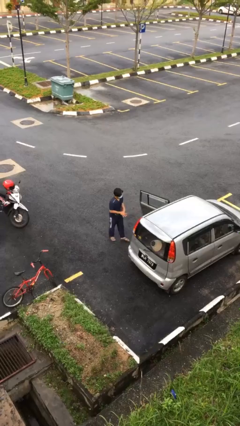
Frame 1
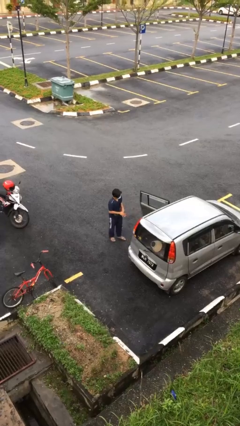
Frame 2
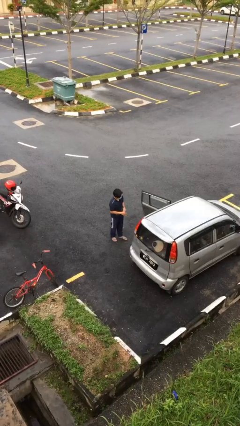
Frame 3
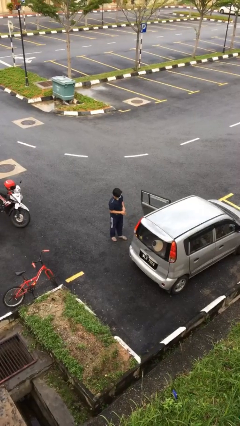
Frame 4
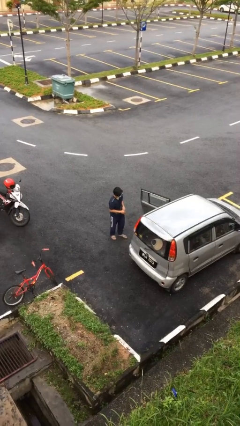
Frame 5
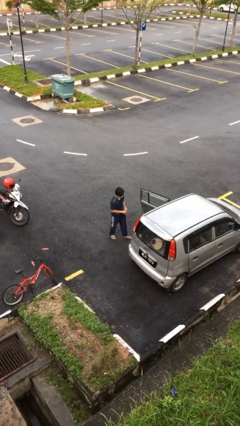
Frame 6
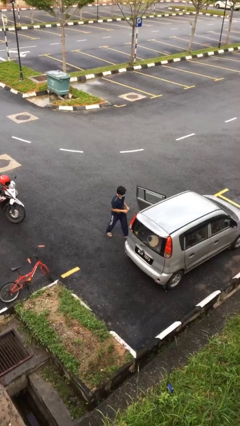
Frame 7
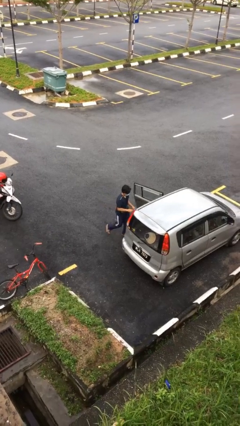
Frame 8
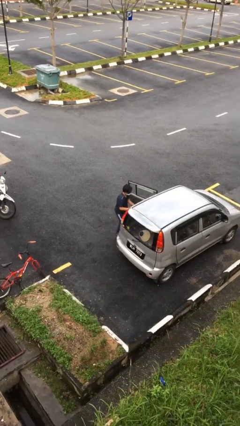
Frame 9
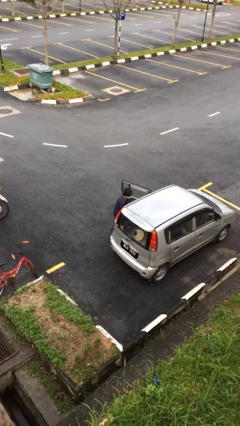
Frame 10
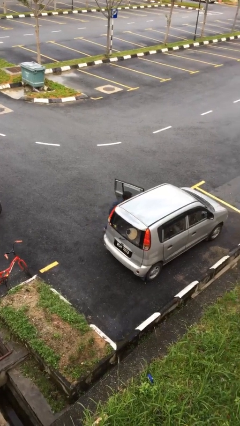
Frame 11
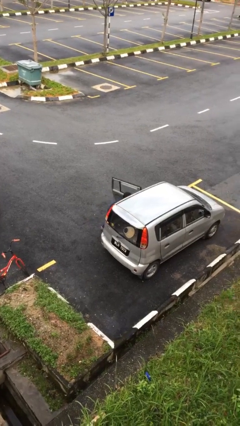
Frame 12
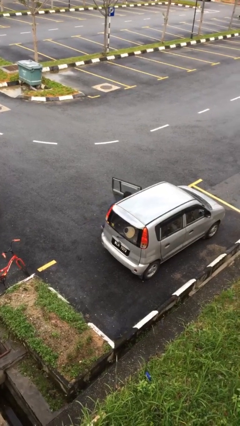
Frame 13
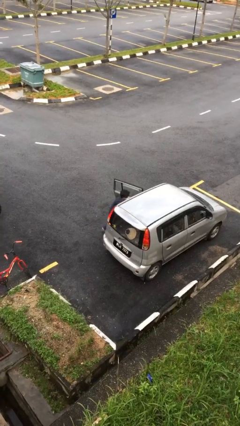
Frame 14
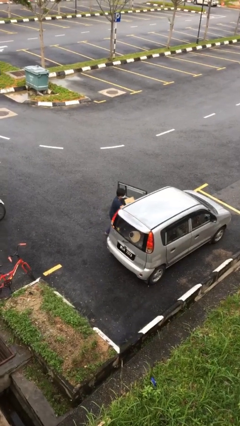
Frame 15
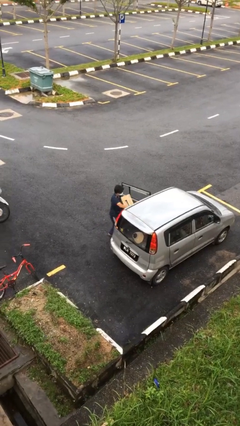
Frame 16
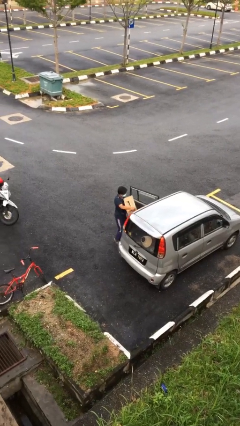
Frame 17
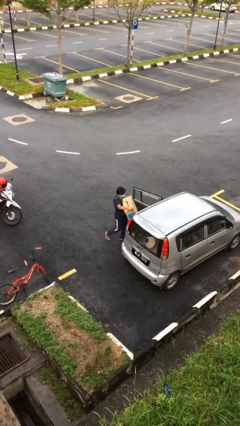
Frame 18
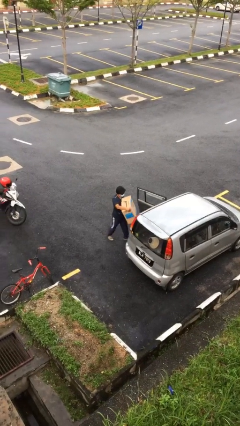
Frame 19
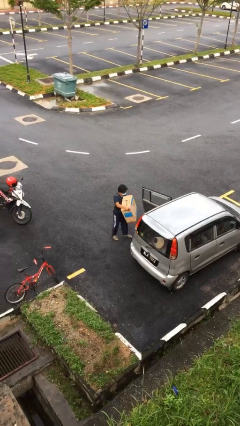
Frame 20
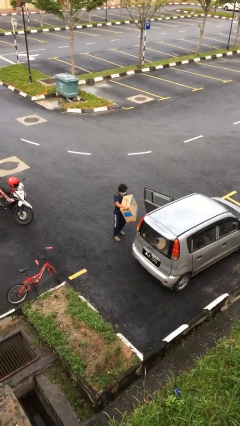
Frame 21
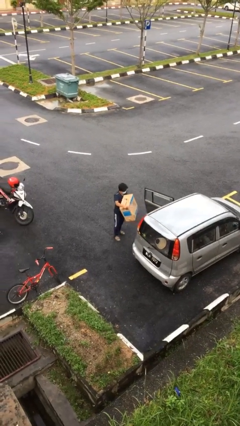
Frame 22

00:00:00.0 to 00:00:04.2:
person unloads car

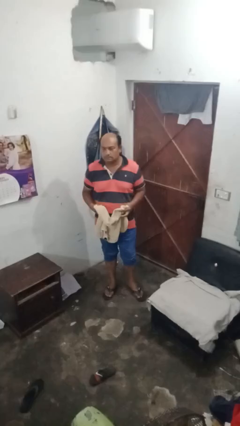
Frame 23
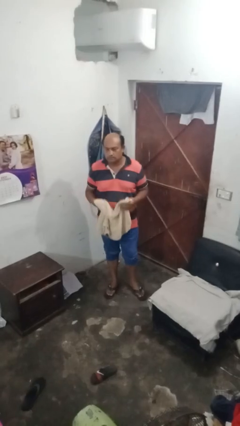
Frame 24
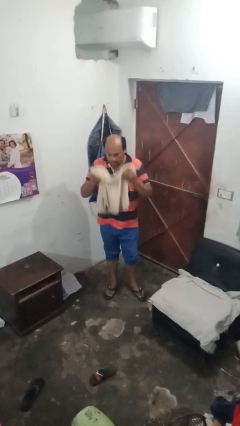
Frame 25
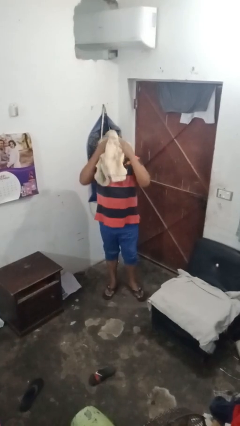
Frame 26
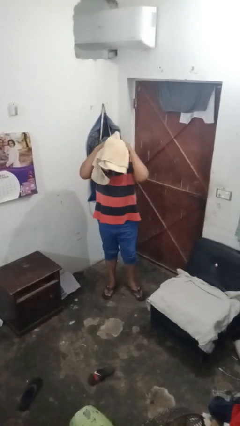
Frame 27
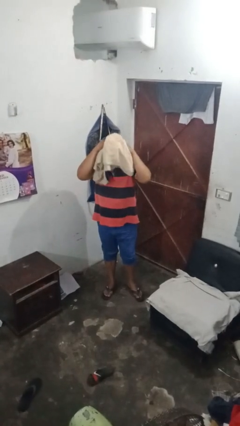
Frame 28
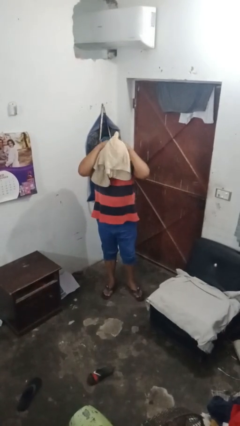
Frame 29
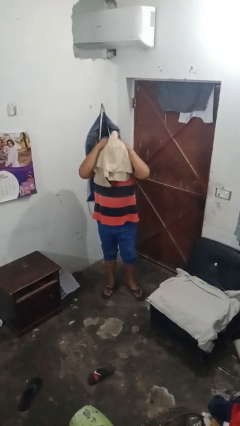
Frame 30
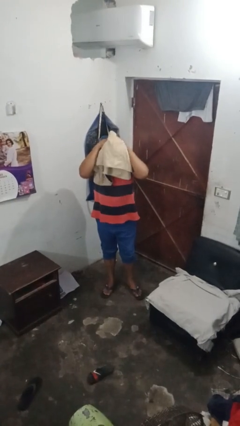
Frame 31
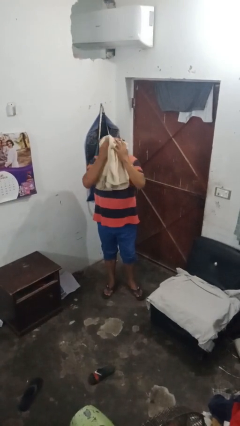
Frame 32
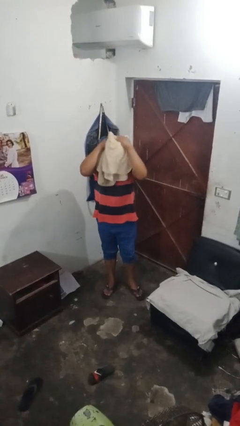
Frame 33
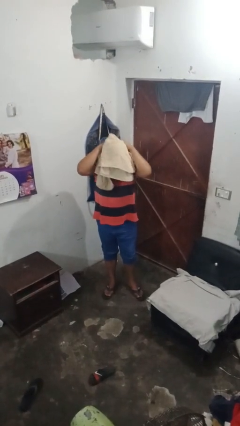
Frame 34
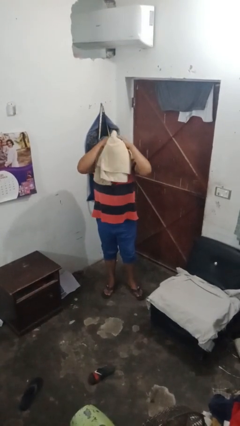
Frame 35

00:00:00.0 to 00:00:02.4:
person dries hair with towel

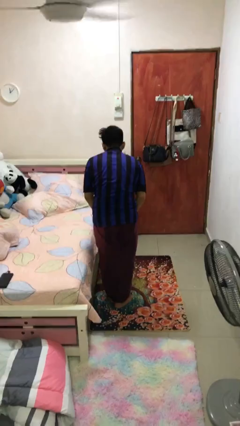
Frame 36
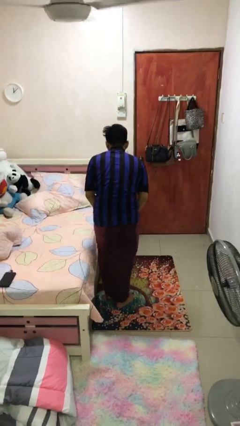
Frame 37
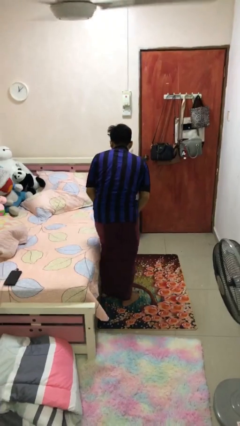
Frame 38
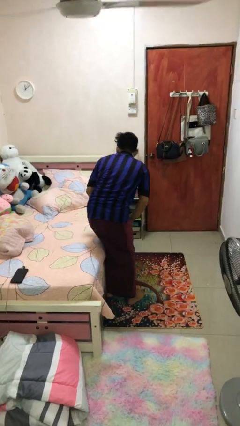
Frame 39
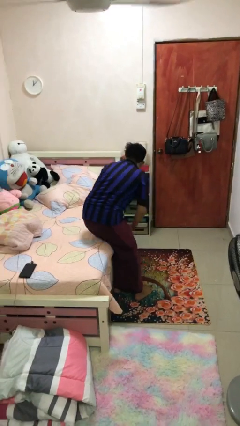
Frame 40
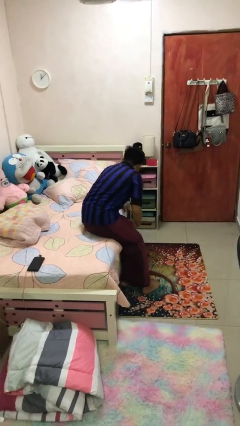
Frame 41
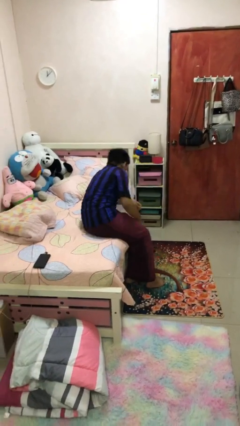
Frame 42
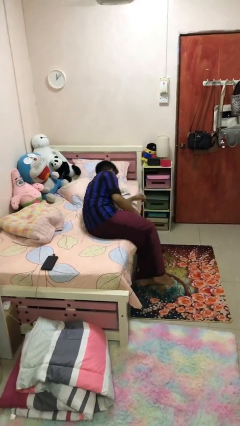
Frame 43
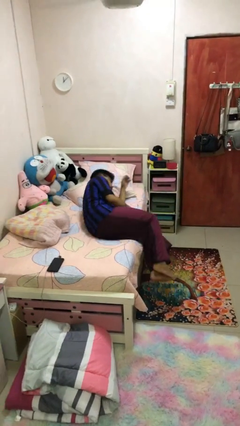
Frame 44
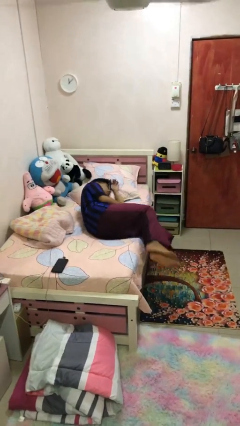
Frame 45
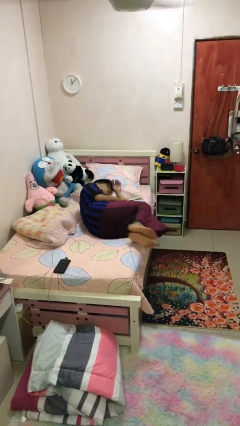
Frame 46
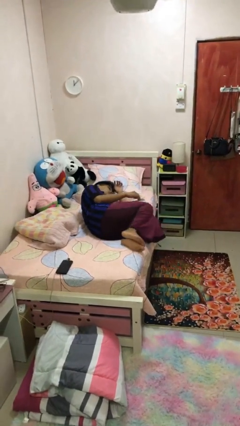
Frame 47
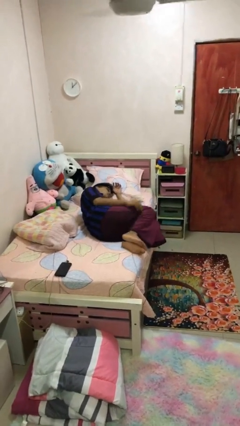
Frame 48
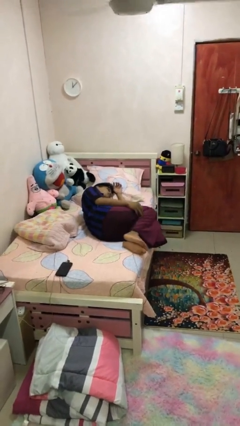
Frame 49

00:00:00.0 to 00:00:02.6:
person lies down on bed

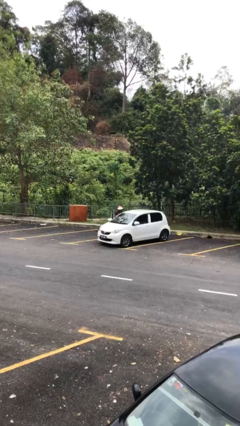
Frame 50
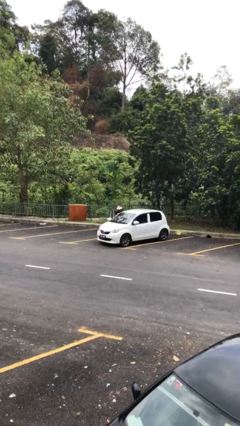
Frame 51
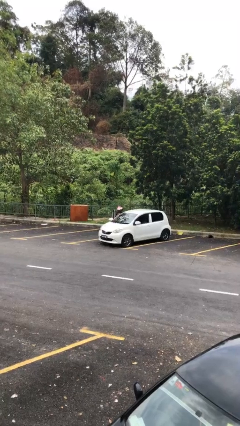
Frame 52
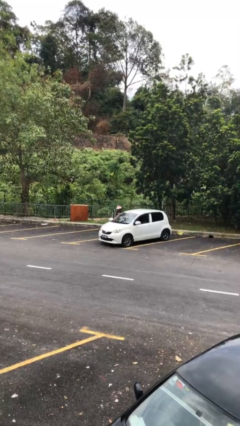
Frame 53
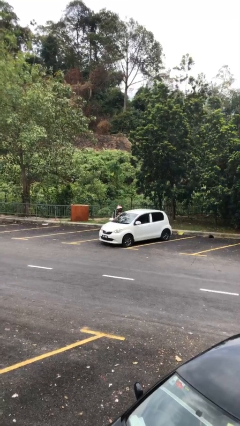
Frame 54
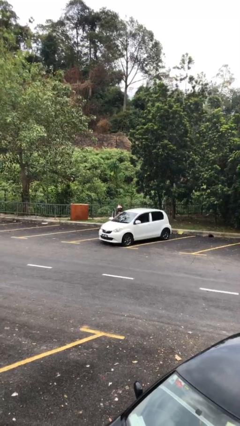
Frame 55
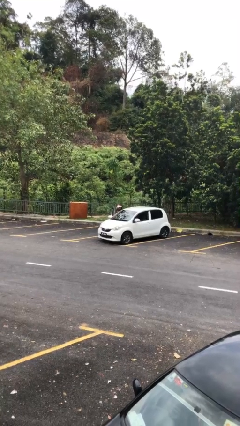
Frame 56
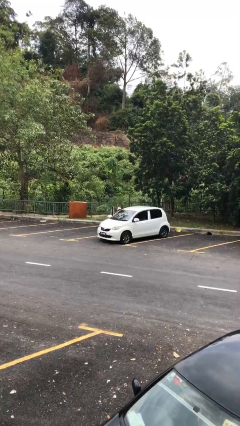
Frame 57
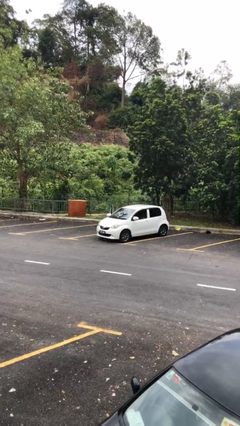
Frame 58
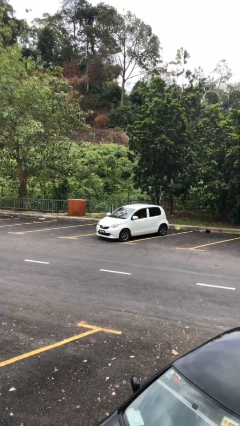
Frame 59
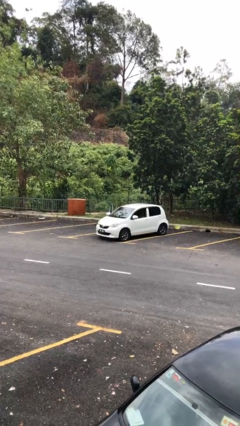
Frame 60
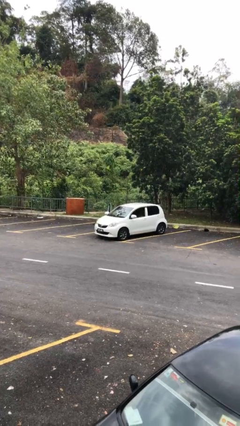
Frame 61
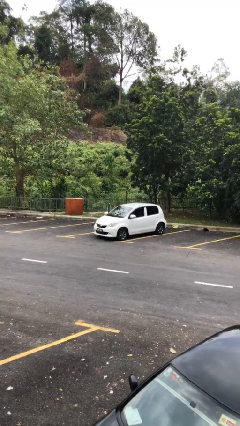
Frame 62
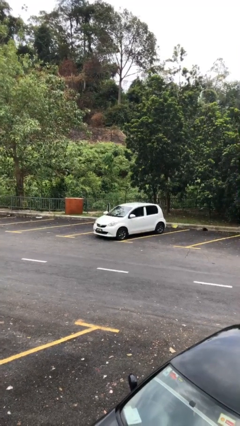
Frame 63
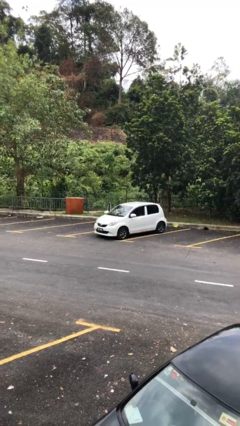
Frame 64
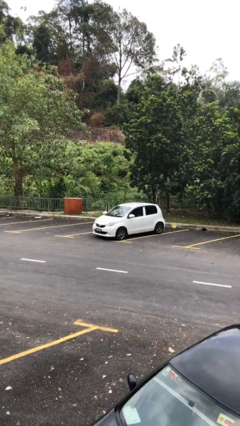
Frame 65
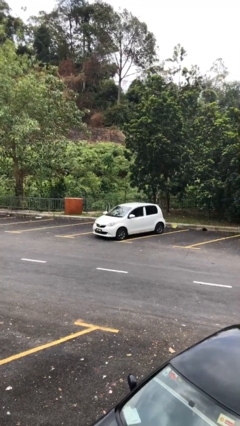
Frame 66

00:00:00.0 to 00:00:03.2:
person enters car

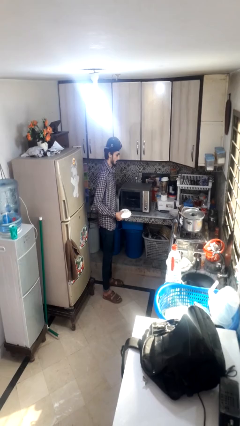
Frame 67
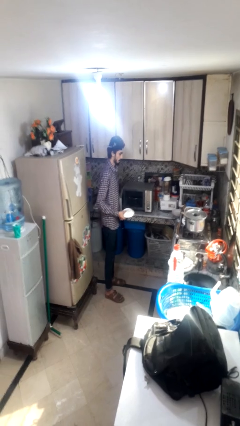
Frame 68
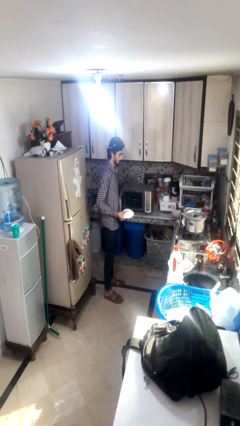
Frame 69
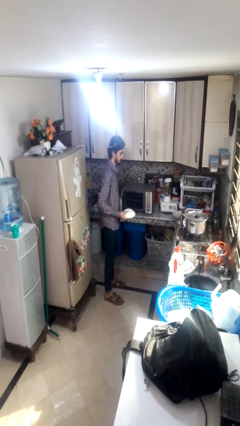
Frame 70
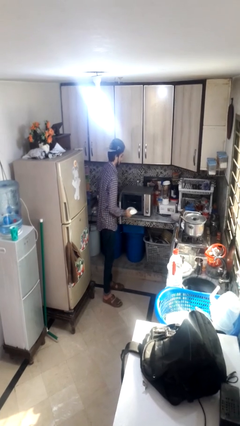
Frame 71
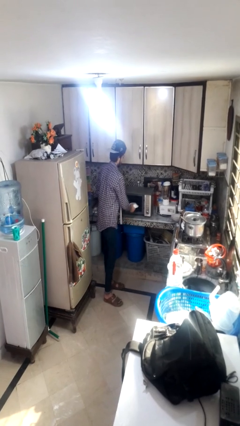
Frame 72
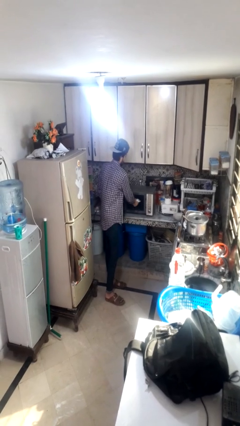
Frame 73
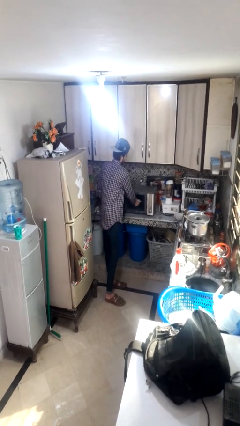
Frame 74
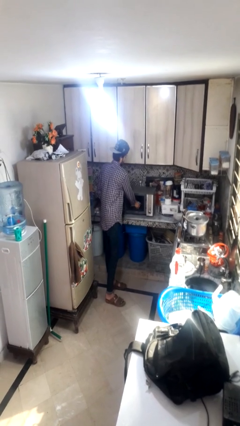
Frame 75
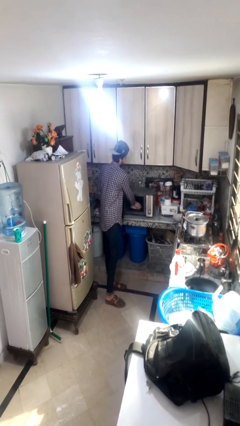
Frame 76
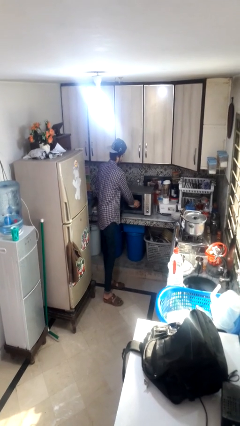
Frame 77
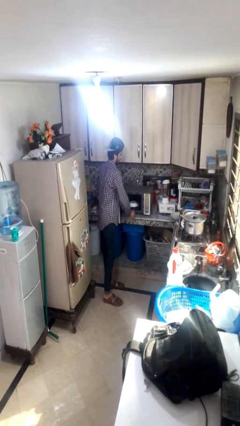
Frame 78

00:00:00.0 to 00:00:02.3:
person puts object into microwave

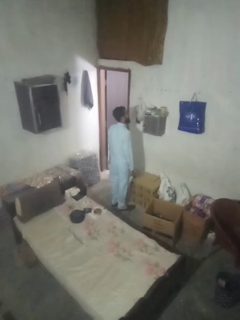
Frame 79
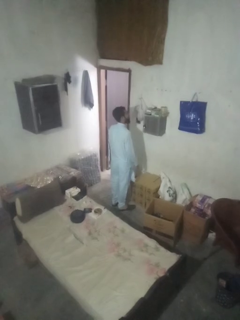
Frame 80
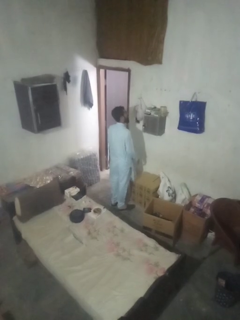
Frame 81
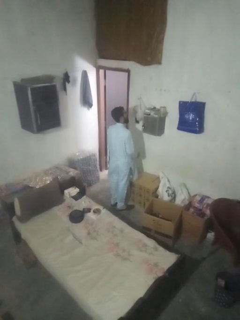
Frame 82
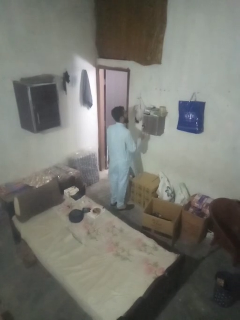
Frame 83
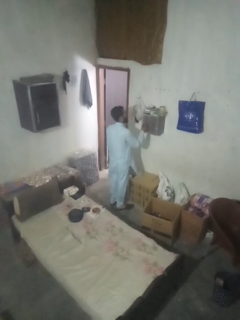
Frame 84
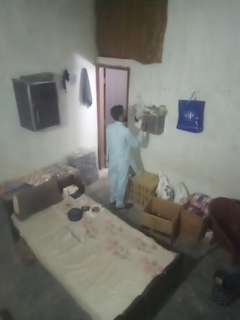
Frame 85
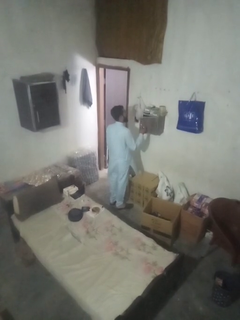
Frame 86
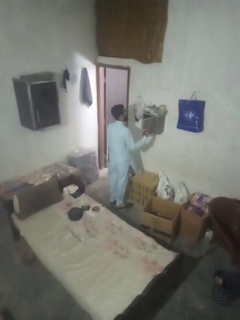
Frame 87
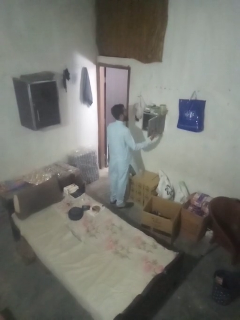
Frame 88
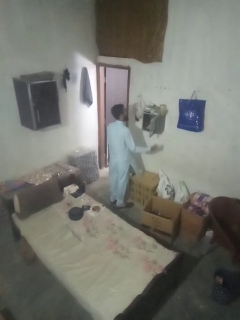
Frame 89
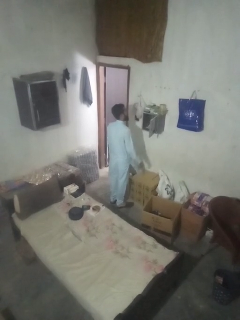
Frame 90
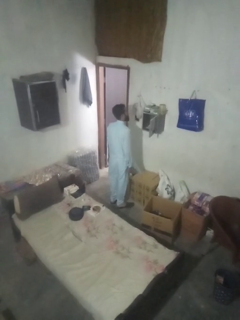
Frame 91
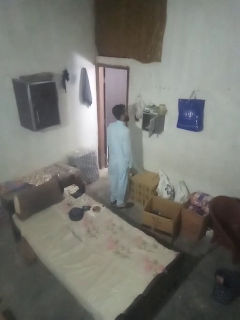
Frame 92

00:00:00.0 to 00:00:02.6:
person opens mailbox

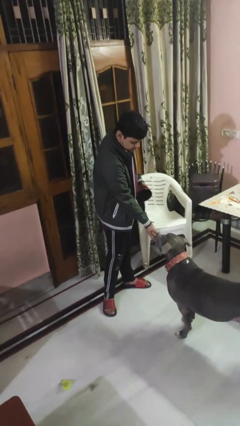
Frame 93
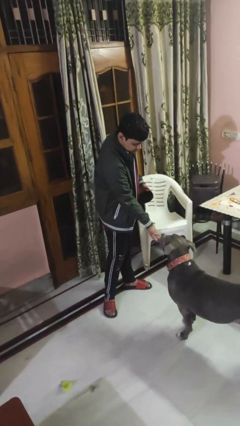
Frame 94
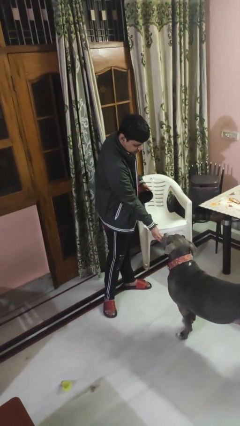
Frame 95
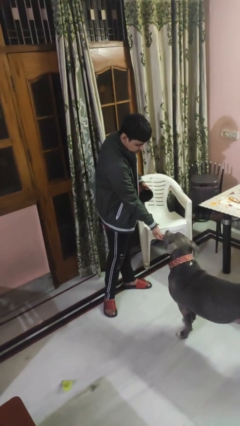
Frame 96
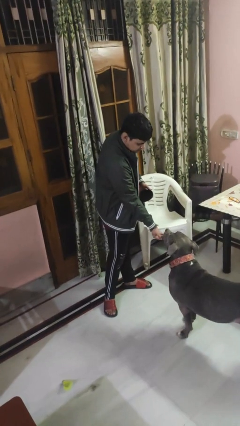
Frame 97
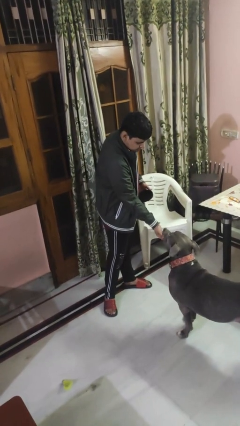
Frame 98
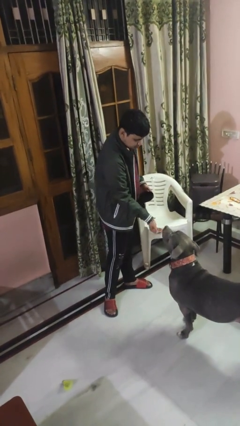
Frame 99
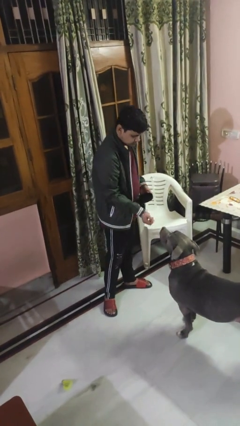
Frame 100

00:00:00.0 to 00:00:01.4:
person feeds dog
